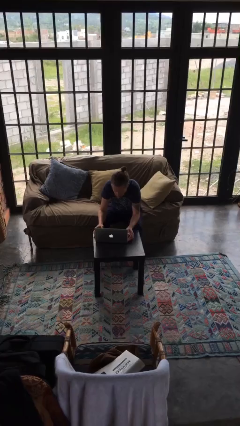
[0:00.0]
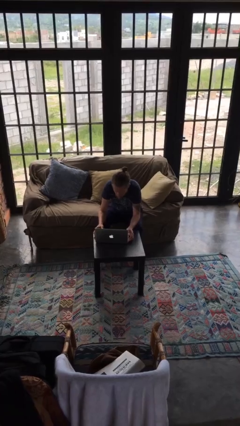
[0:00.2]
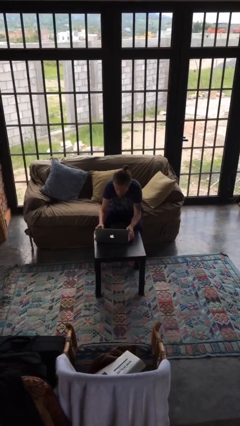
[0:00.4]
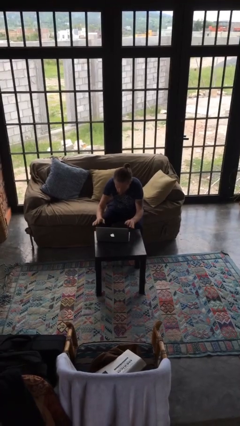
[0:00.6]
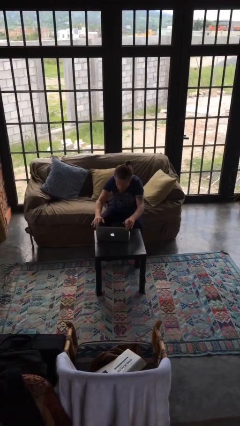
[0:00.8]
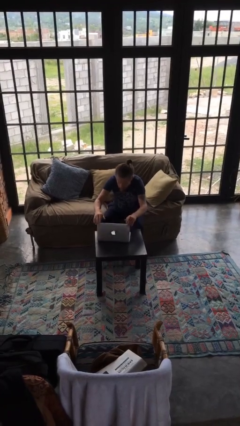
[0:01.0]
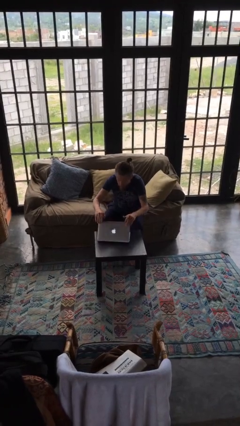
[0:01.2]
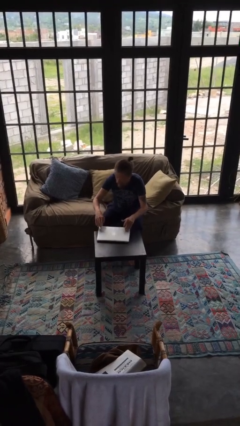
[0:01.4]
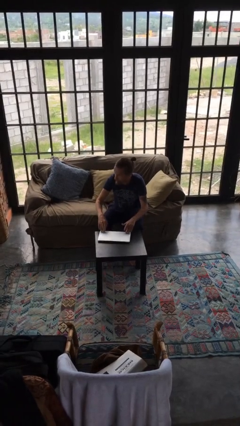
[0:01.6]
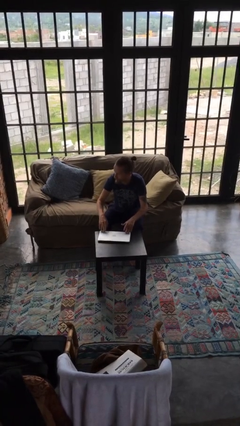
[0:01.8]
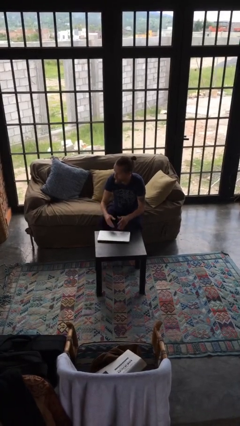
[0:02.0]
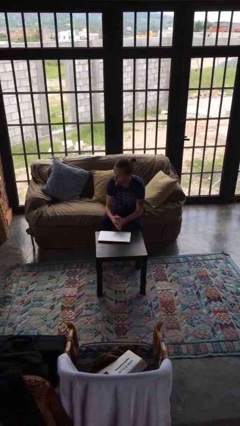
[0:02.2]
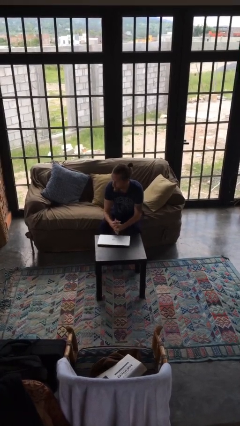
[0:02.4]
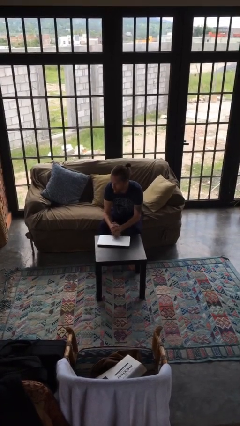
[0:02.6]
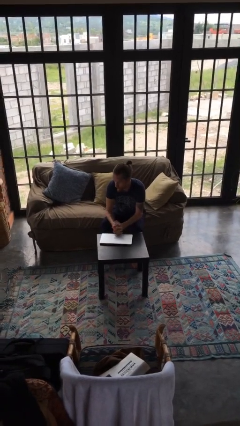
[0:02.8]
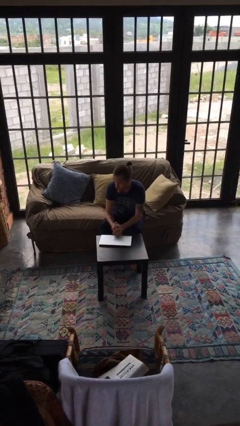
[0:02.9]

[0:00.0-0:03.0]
person closes laptop

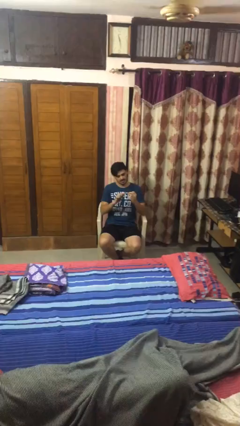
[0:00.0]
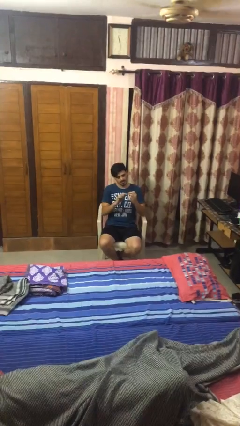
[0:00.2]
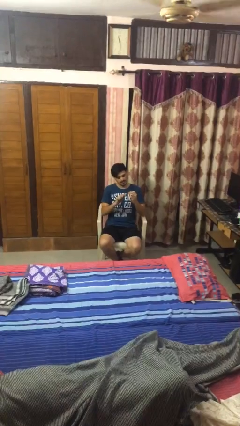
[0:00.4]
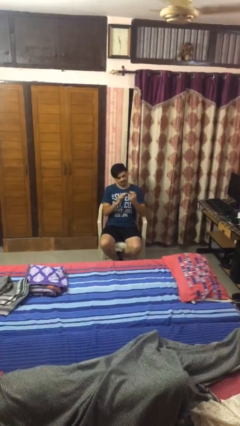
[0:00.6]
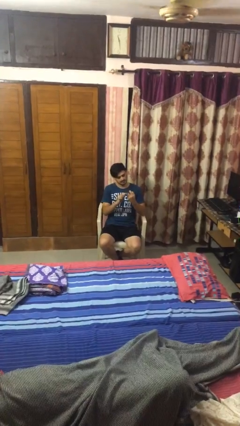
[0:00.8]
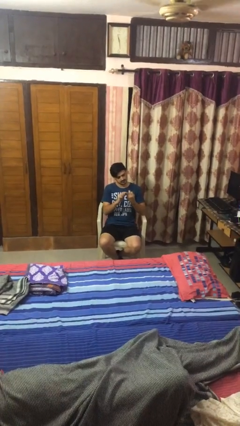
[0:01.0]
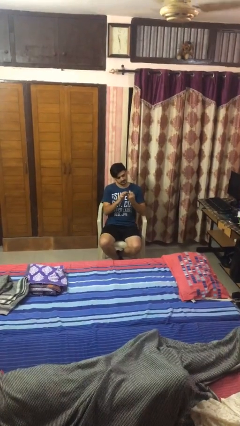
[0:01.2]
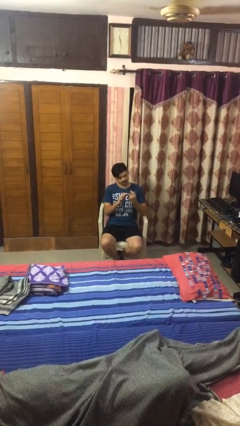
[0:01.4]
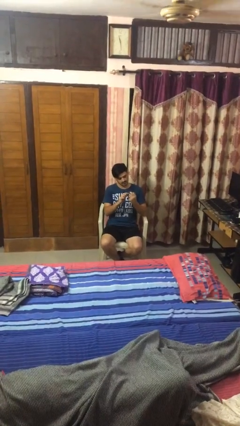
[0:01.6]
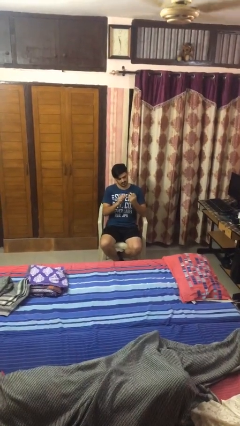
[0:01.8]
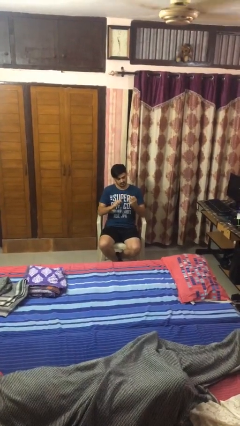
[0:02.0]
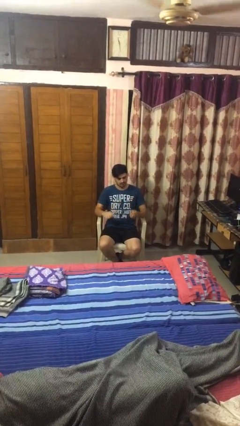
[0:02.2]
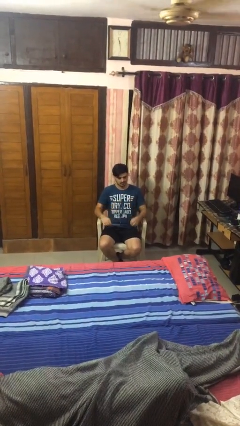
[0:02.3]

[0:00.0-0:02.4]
person files fingernails

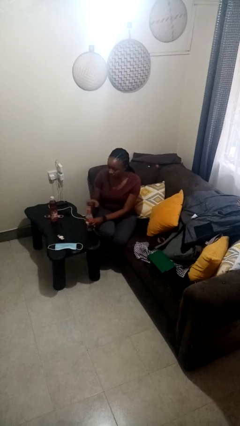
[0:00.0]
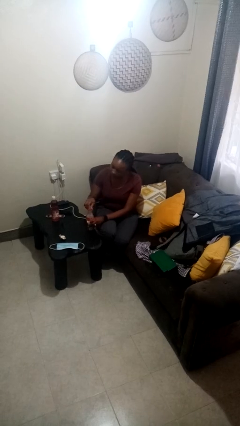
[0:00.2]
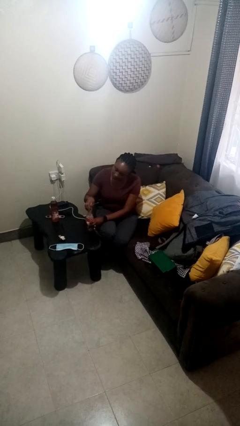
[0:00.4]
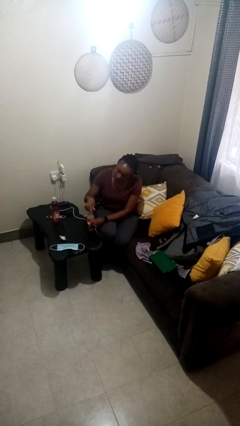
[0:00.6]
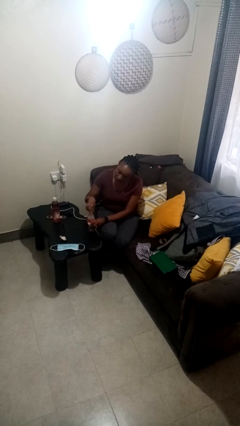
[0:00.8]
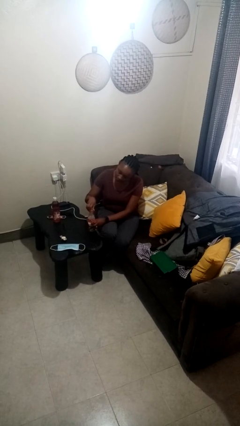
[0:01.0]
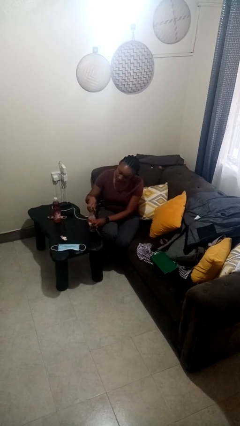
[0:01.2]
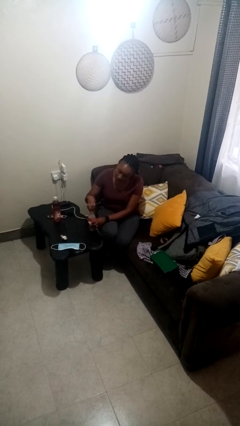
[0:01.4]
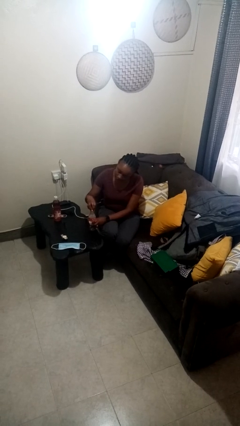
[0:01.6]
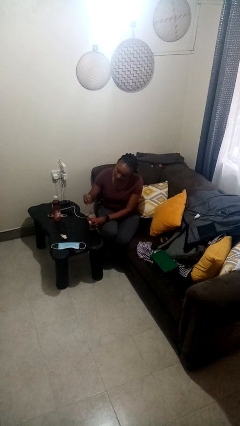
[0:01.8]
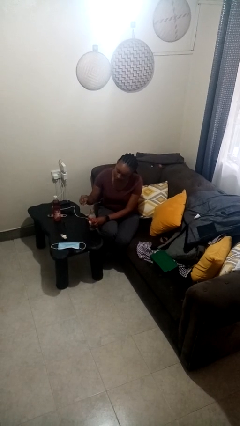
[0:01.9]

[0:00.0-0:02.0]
person unscrews lid from bottle

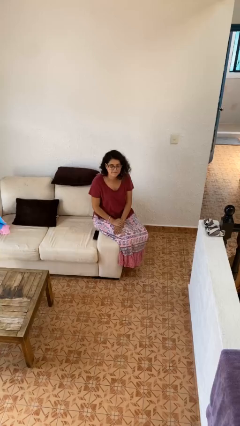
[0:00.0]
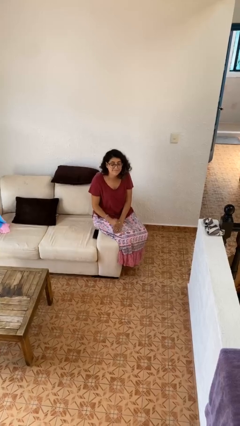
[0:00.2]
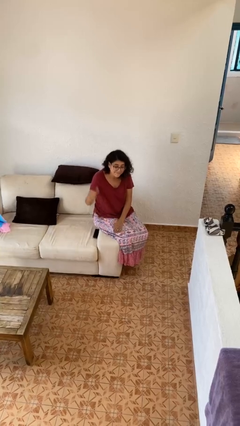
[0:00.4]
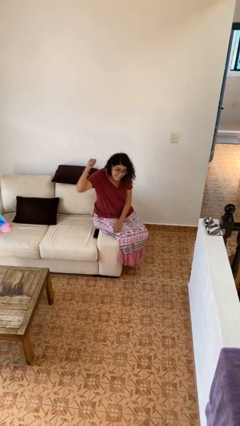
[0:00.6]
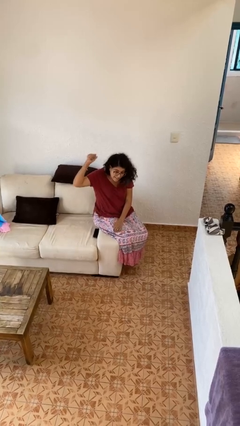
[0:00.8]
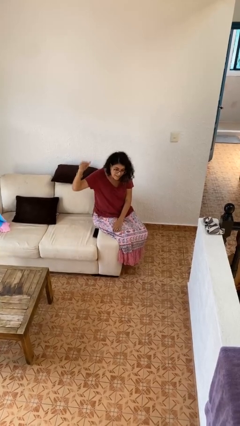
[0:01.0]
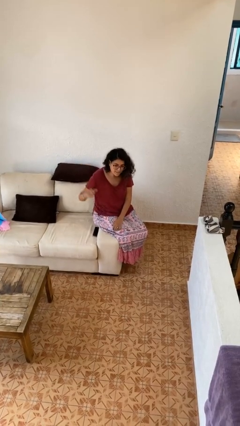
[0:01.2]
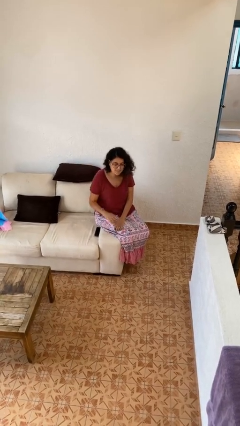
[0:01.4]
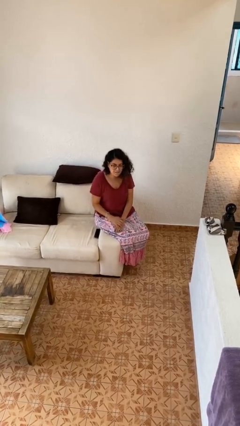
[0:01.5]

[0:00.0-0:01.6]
person gestures behind me

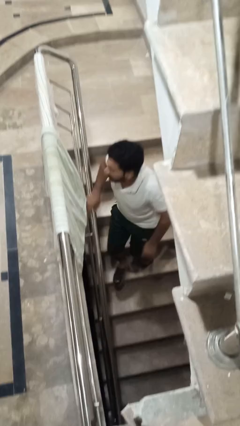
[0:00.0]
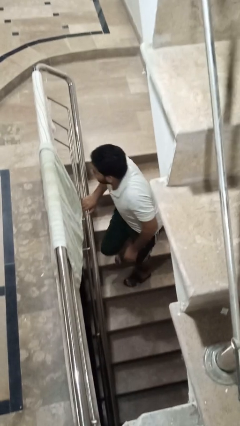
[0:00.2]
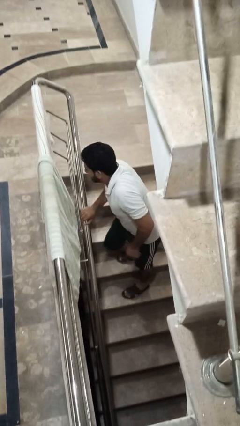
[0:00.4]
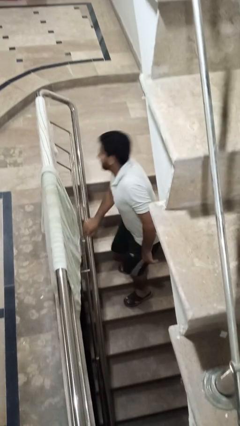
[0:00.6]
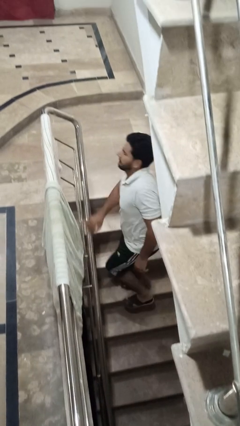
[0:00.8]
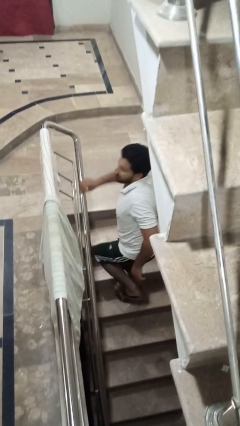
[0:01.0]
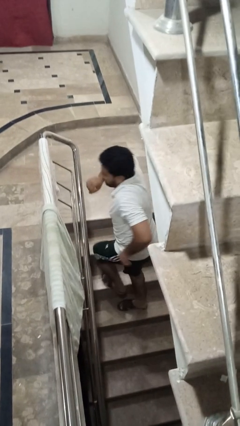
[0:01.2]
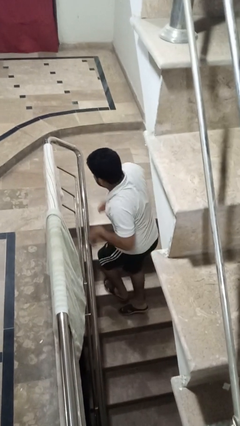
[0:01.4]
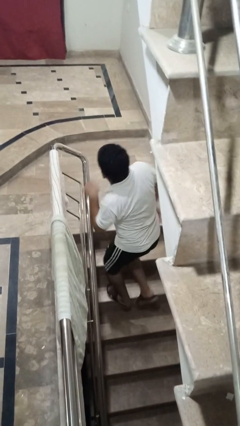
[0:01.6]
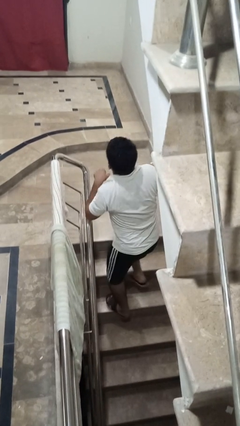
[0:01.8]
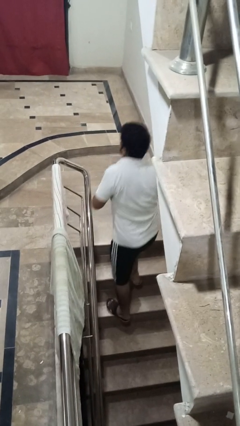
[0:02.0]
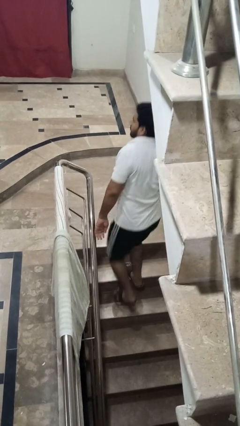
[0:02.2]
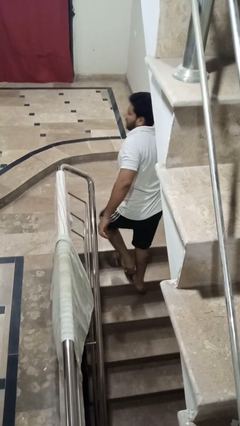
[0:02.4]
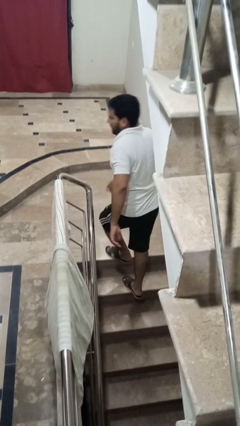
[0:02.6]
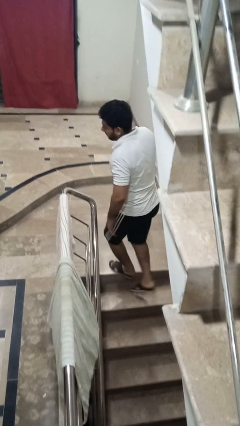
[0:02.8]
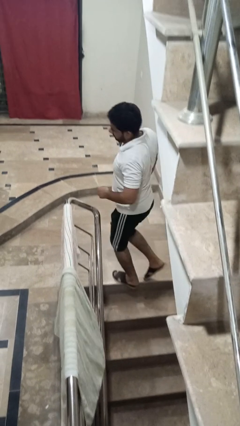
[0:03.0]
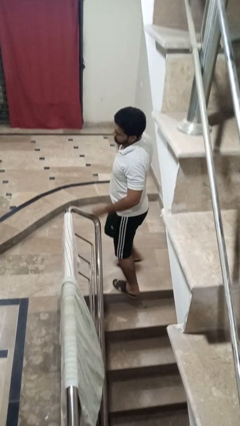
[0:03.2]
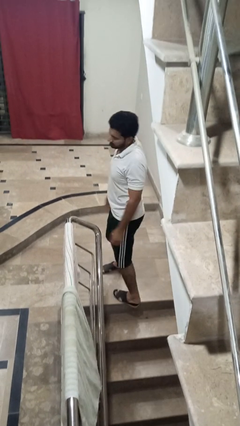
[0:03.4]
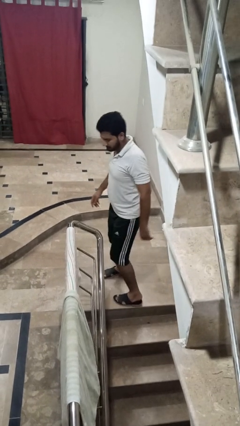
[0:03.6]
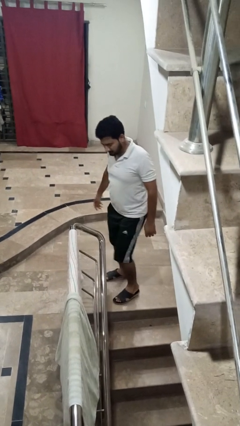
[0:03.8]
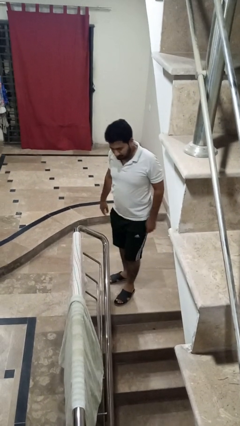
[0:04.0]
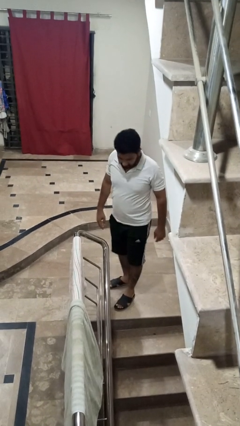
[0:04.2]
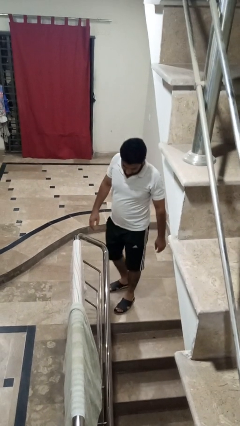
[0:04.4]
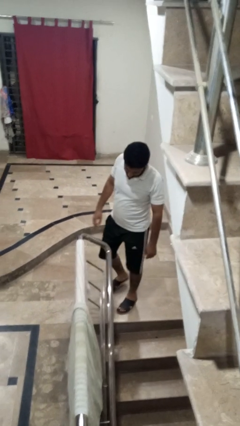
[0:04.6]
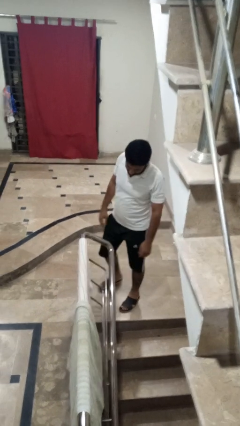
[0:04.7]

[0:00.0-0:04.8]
person climbs up stairs

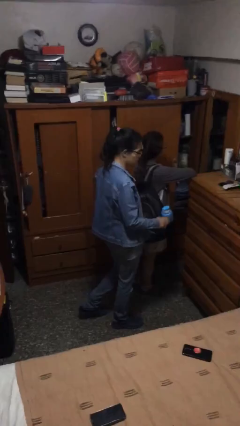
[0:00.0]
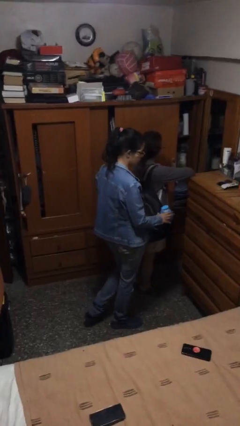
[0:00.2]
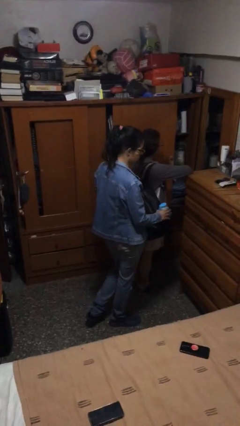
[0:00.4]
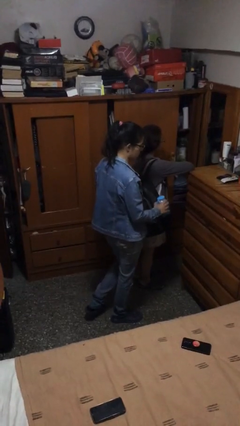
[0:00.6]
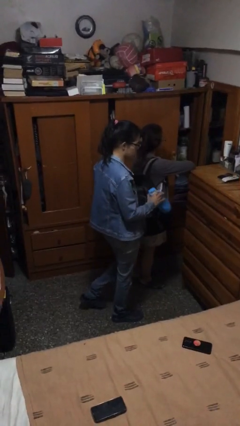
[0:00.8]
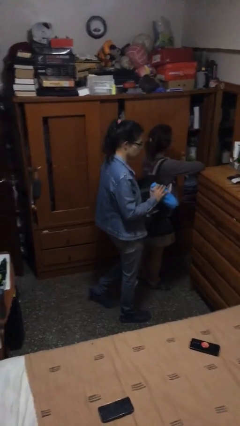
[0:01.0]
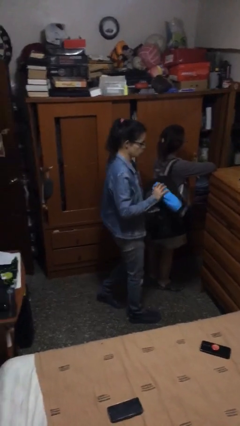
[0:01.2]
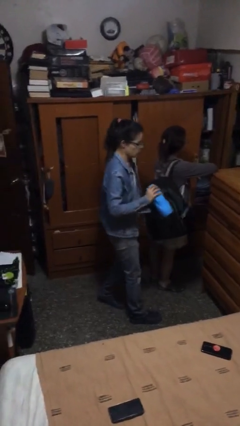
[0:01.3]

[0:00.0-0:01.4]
person steals object from person

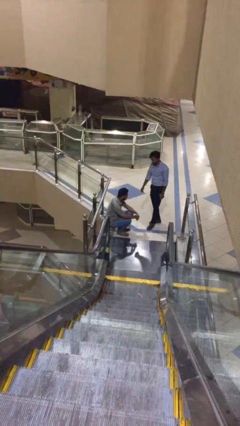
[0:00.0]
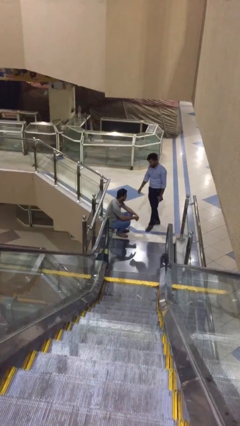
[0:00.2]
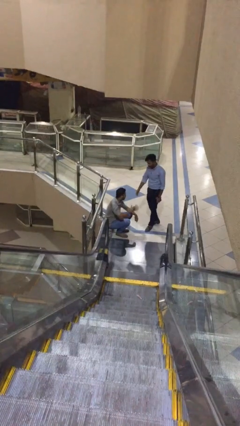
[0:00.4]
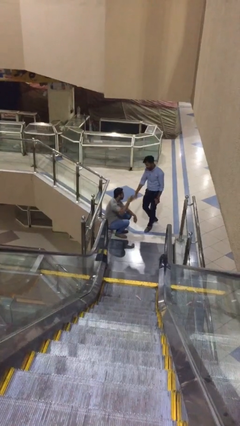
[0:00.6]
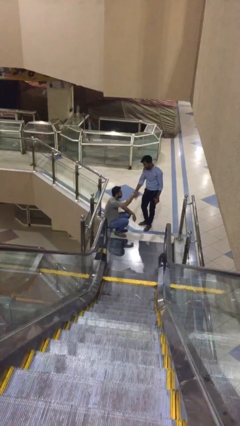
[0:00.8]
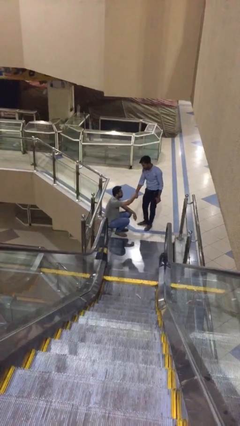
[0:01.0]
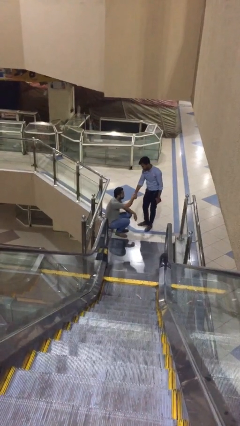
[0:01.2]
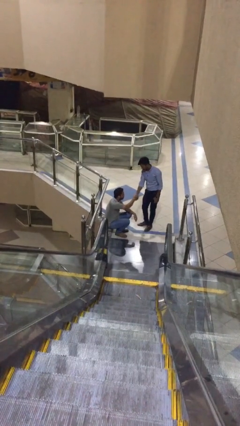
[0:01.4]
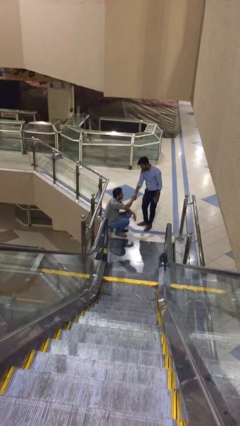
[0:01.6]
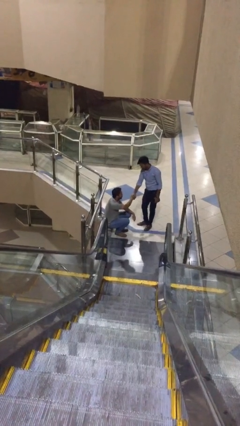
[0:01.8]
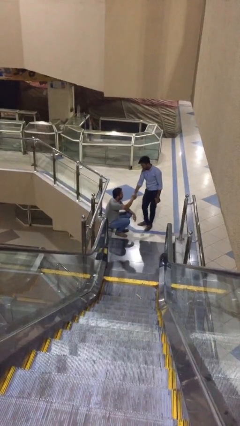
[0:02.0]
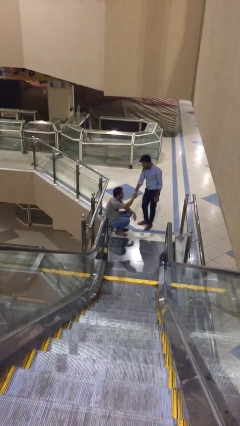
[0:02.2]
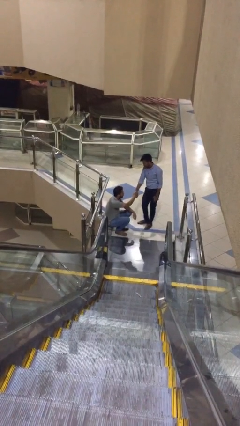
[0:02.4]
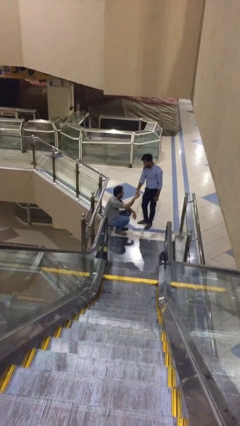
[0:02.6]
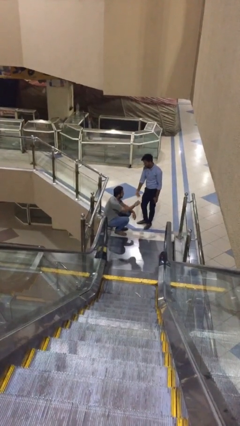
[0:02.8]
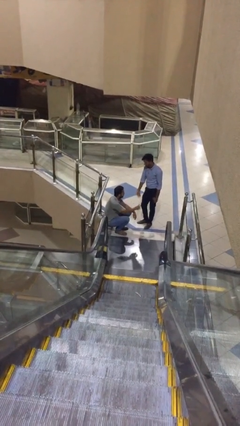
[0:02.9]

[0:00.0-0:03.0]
person shakes hand
